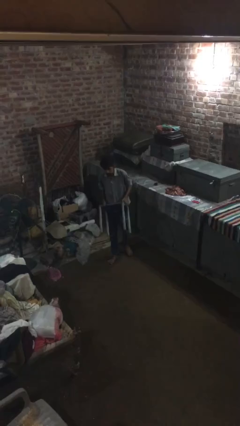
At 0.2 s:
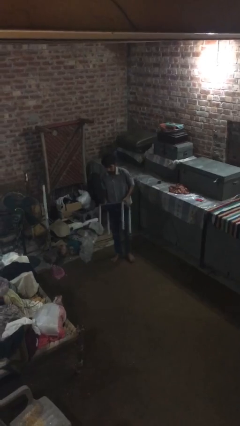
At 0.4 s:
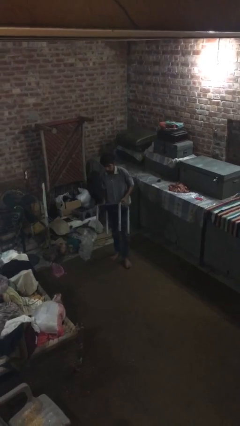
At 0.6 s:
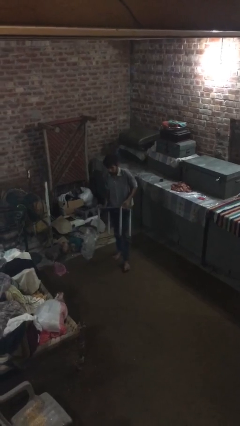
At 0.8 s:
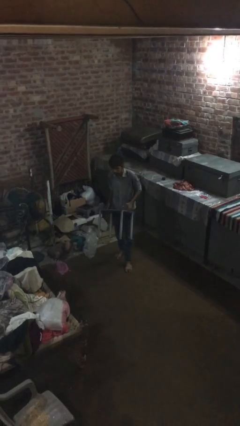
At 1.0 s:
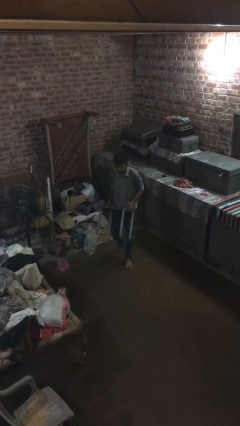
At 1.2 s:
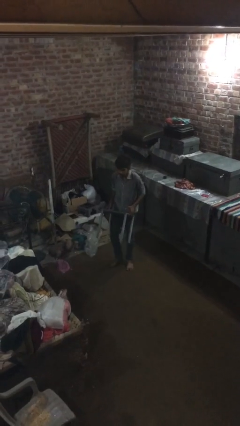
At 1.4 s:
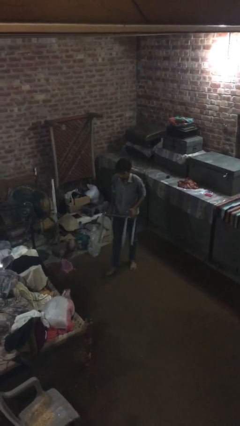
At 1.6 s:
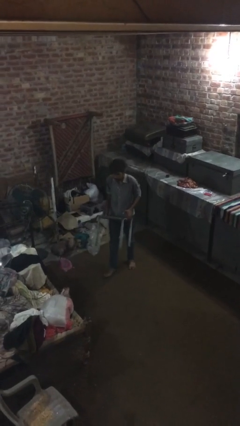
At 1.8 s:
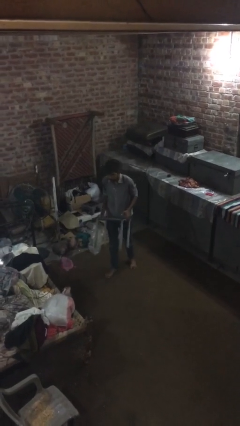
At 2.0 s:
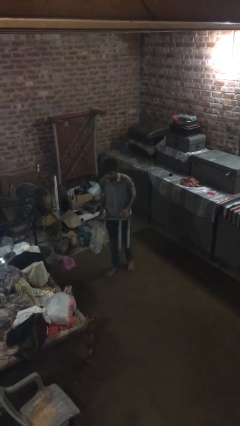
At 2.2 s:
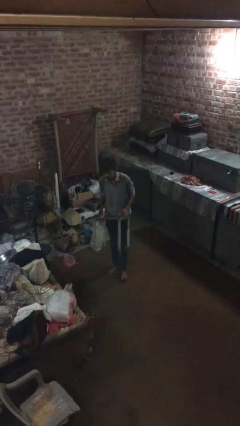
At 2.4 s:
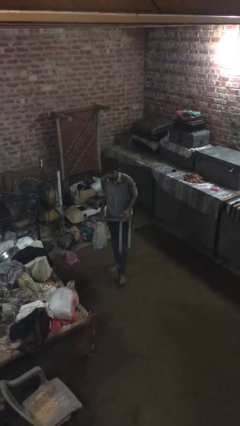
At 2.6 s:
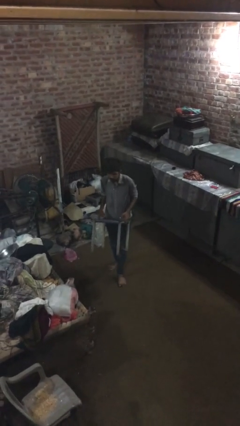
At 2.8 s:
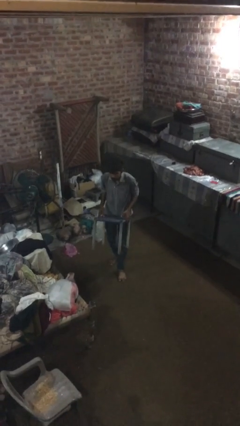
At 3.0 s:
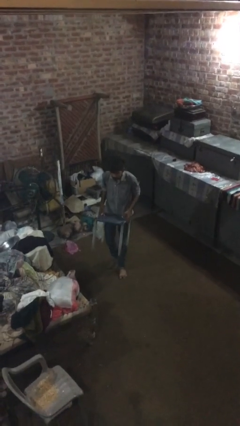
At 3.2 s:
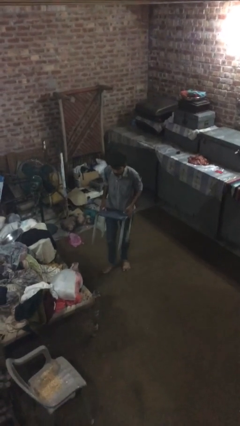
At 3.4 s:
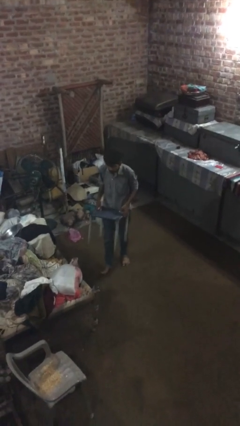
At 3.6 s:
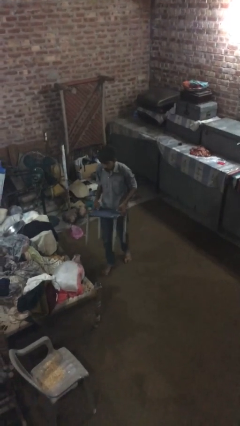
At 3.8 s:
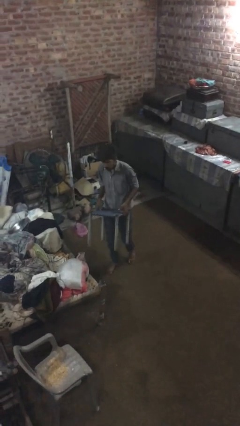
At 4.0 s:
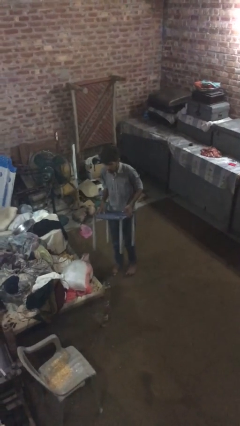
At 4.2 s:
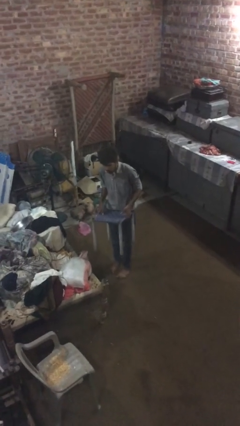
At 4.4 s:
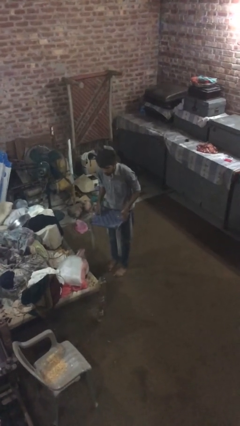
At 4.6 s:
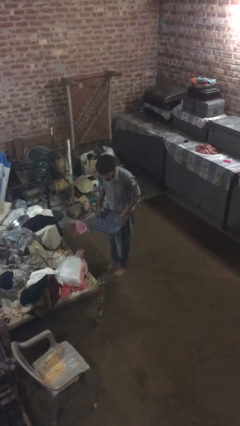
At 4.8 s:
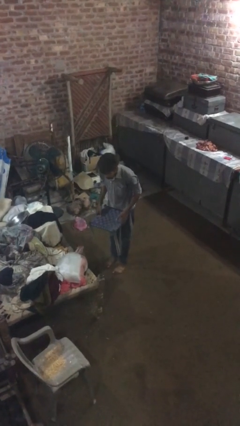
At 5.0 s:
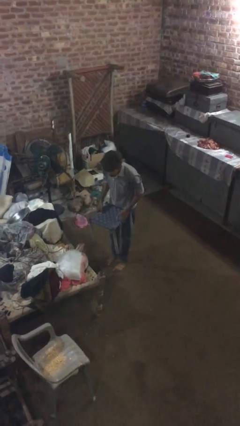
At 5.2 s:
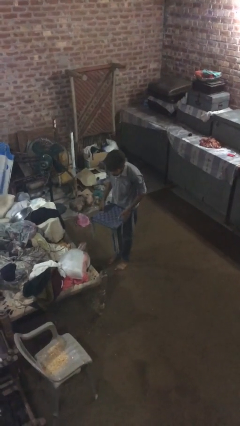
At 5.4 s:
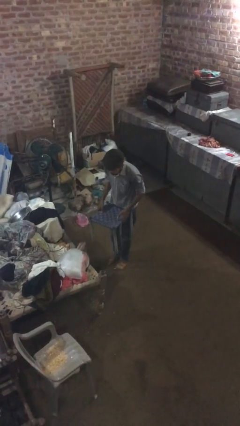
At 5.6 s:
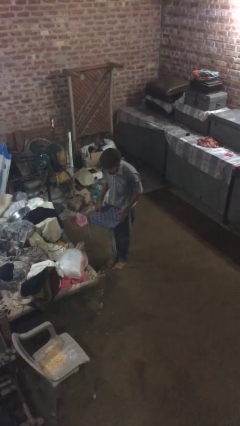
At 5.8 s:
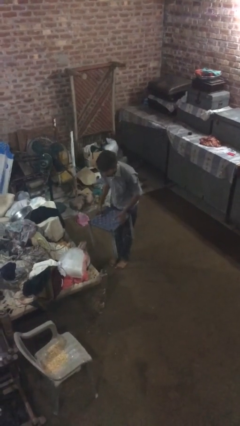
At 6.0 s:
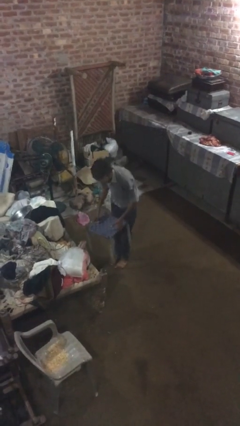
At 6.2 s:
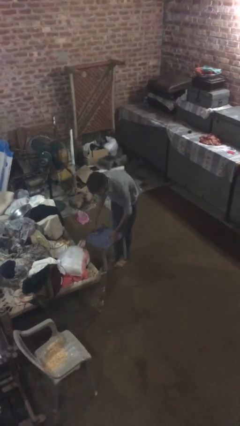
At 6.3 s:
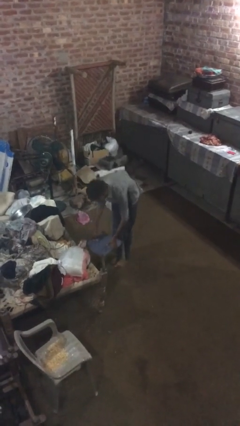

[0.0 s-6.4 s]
person carries heavy object

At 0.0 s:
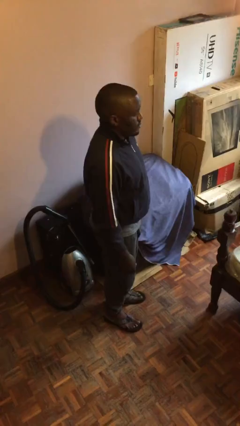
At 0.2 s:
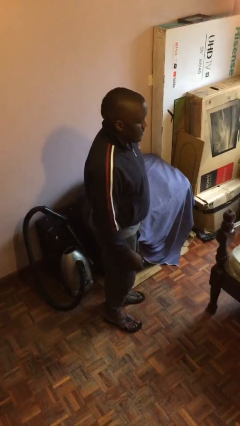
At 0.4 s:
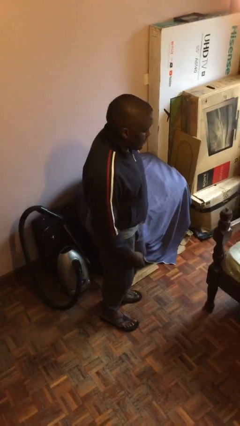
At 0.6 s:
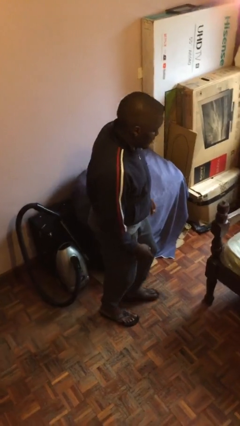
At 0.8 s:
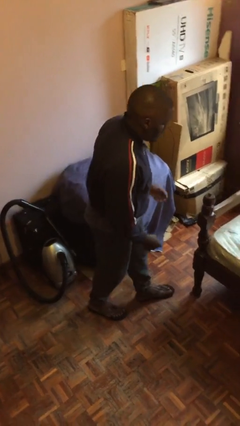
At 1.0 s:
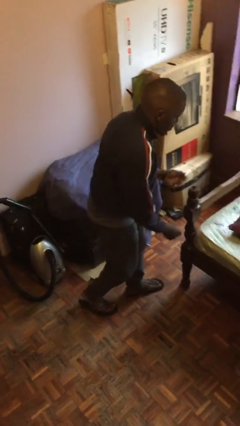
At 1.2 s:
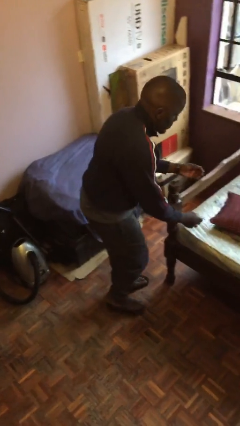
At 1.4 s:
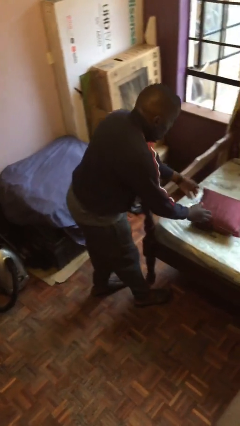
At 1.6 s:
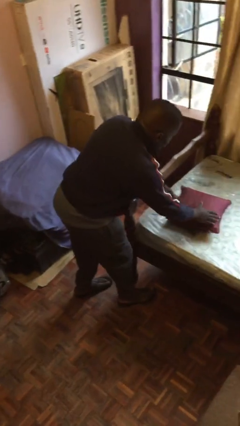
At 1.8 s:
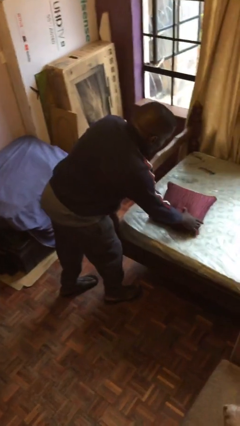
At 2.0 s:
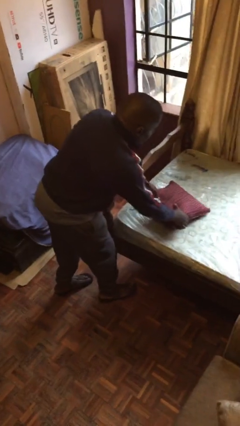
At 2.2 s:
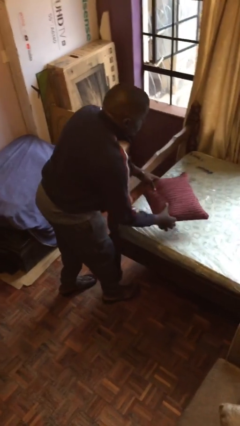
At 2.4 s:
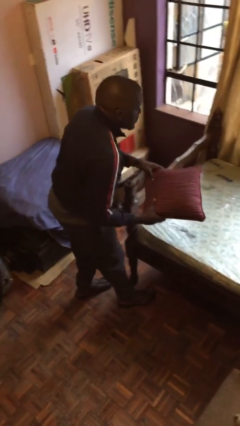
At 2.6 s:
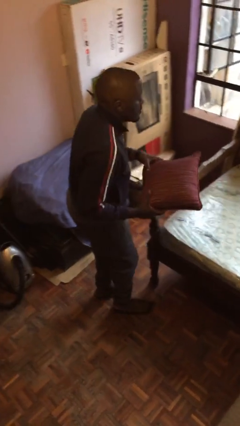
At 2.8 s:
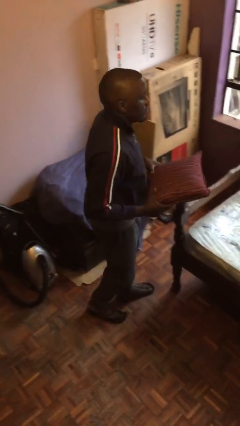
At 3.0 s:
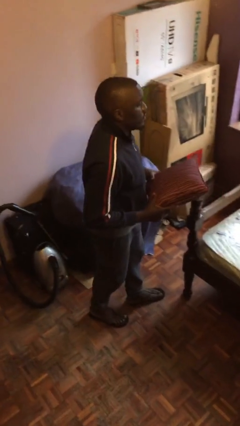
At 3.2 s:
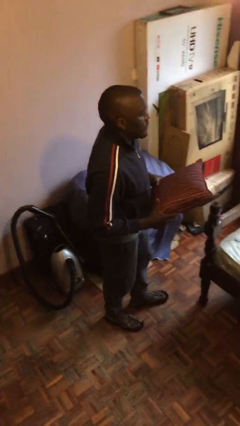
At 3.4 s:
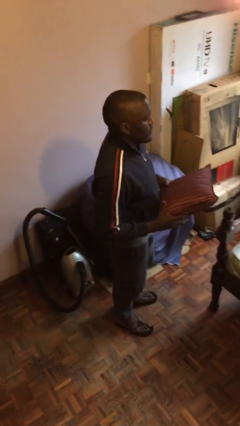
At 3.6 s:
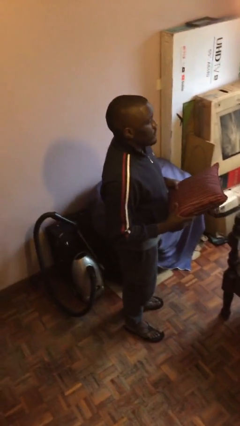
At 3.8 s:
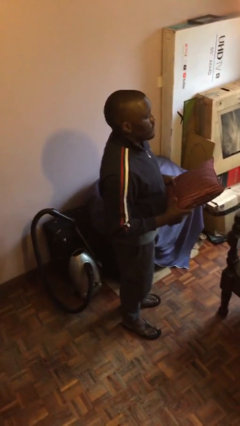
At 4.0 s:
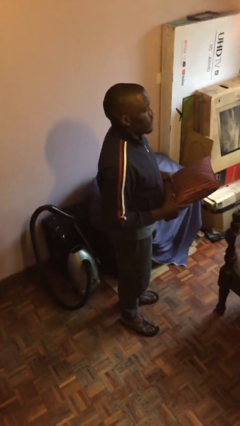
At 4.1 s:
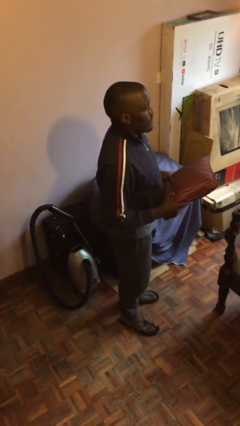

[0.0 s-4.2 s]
person picks up object from bed

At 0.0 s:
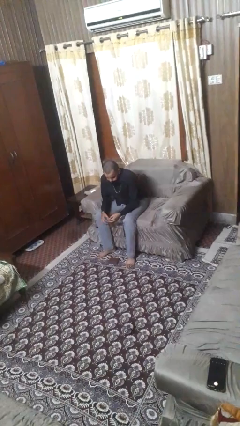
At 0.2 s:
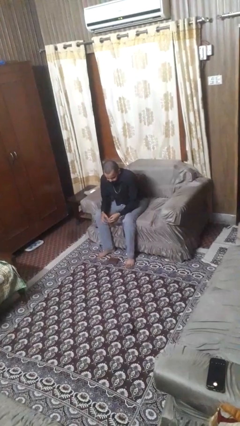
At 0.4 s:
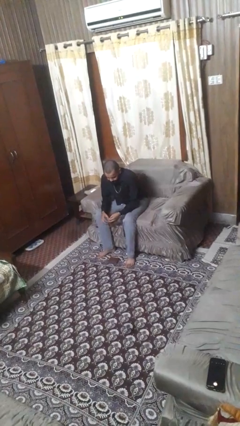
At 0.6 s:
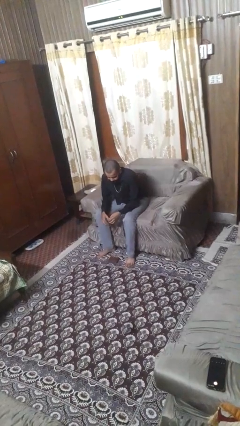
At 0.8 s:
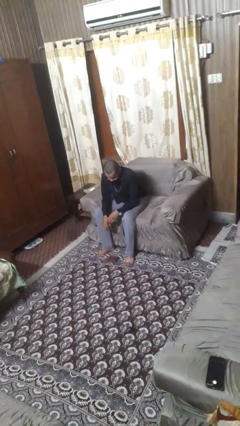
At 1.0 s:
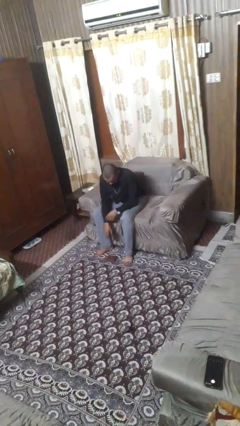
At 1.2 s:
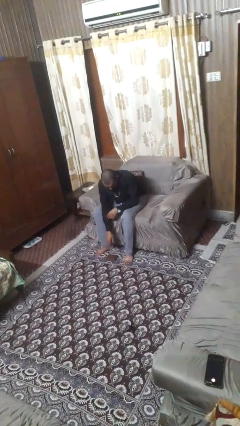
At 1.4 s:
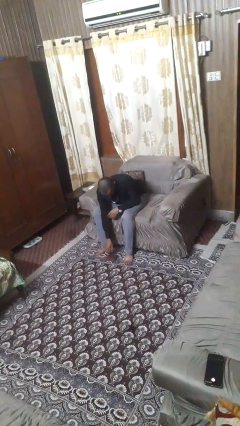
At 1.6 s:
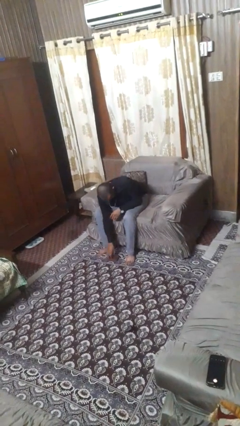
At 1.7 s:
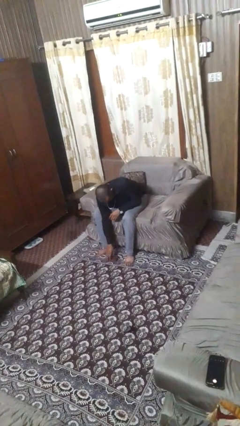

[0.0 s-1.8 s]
person drops object

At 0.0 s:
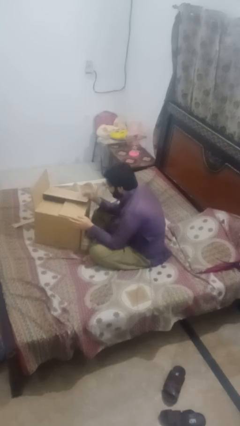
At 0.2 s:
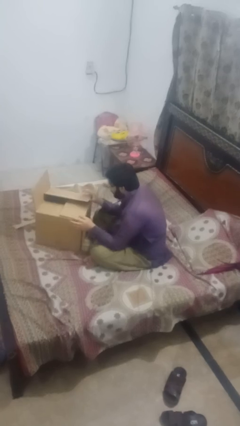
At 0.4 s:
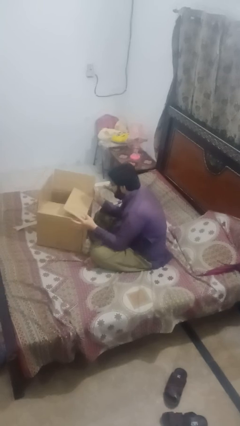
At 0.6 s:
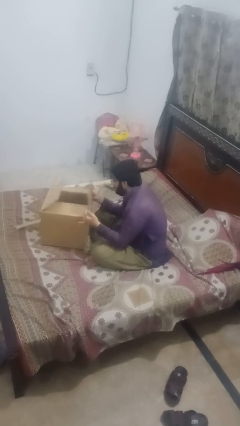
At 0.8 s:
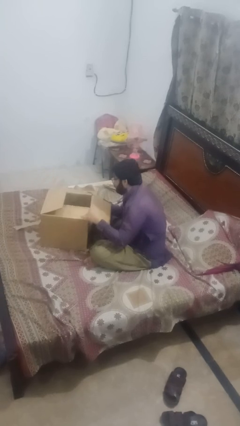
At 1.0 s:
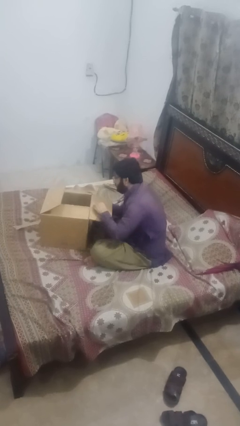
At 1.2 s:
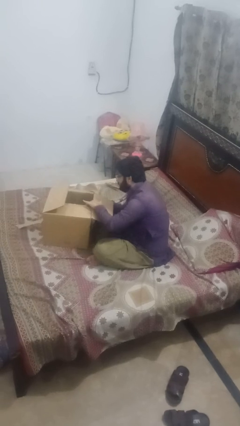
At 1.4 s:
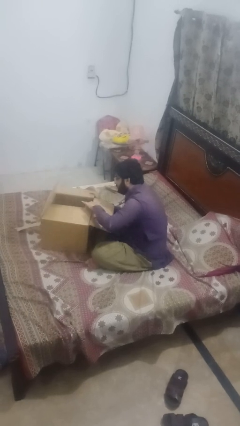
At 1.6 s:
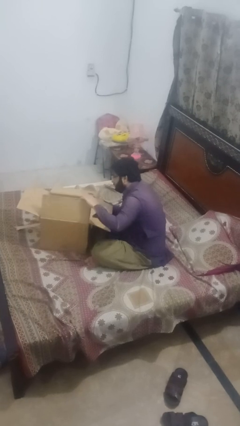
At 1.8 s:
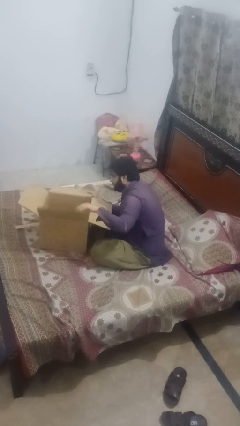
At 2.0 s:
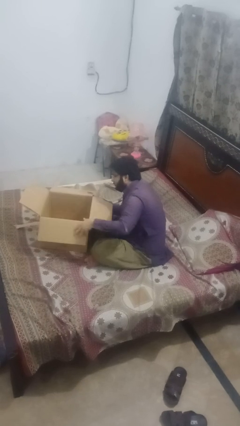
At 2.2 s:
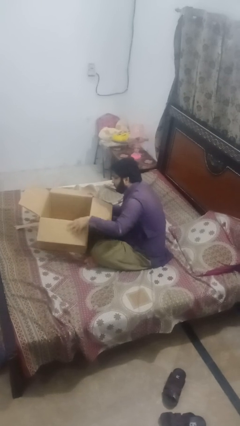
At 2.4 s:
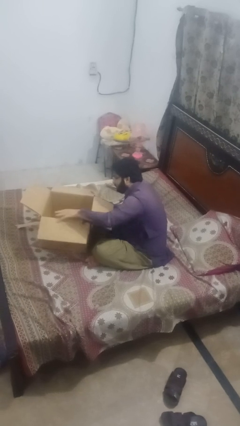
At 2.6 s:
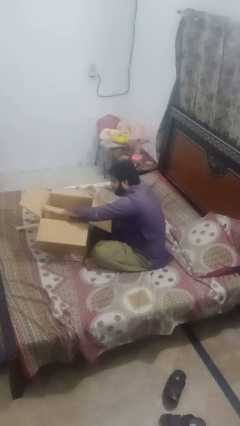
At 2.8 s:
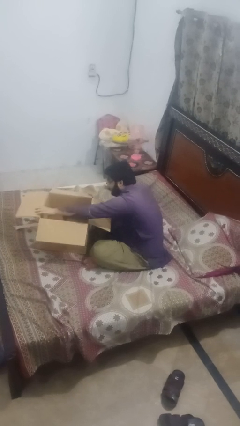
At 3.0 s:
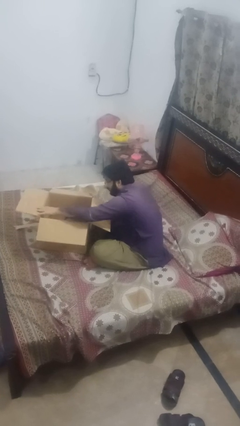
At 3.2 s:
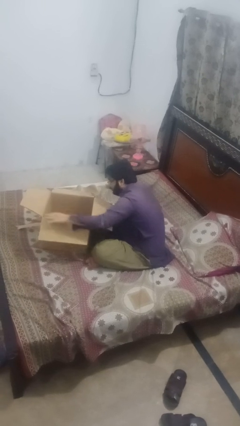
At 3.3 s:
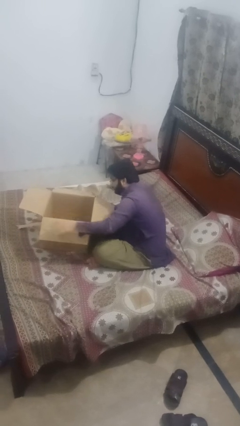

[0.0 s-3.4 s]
person opens box

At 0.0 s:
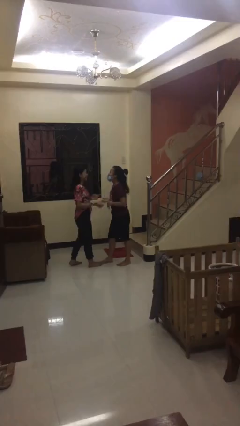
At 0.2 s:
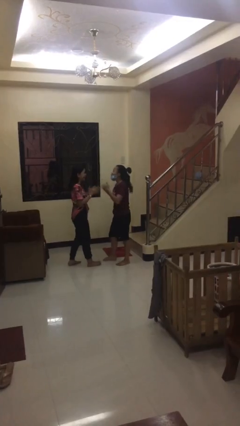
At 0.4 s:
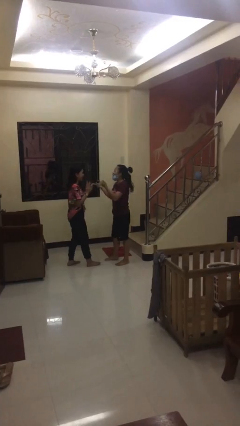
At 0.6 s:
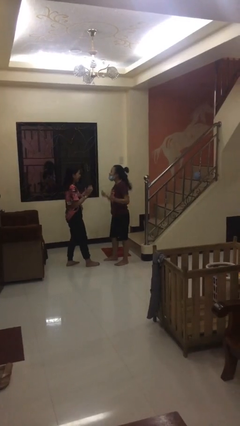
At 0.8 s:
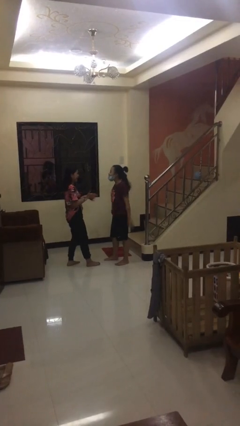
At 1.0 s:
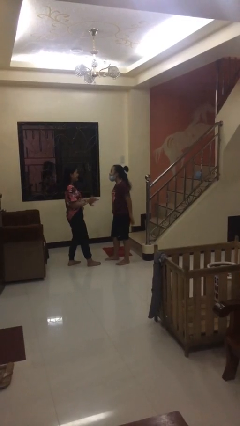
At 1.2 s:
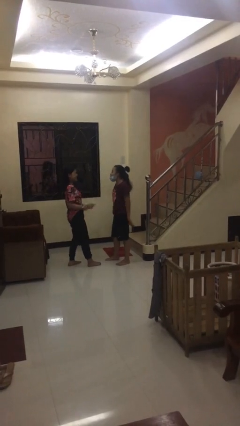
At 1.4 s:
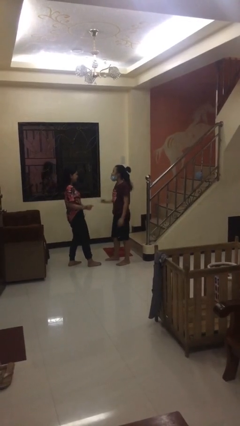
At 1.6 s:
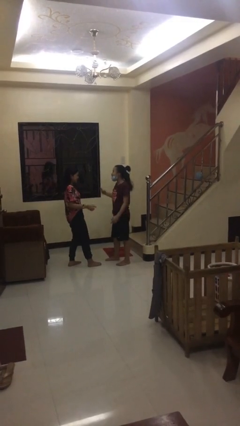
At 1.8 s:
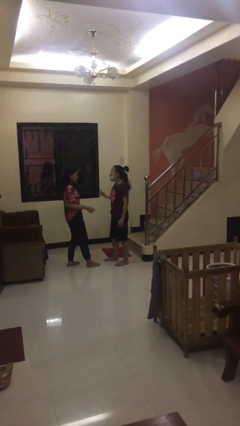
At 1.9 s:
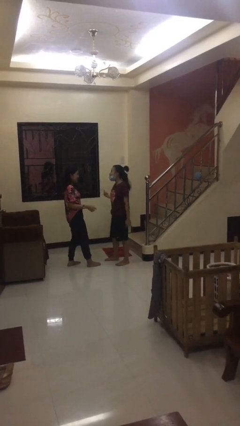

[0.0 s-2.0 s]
person talks to person

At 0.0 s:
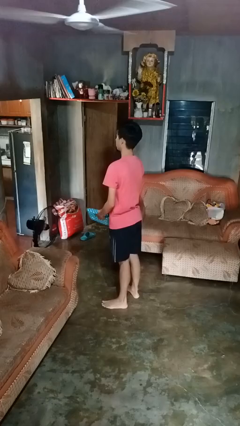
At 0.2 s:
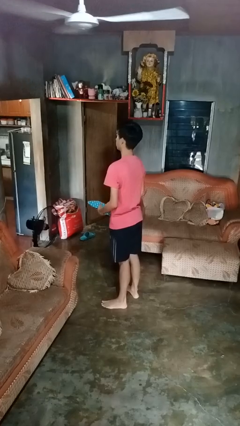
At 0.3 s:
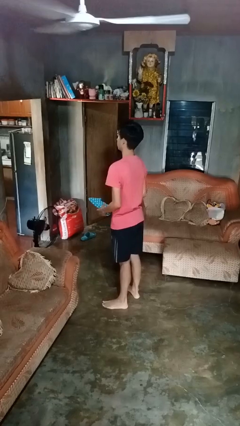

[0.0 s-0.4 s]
person catches dropped object
